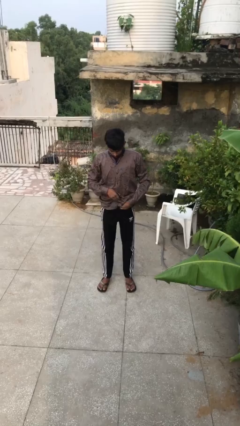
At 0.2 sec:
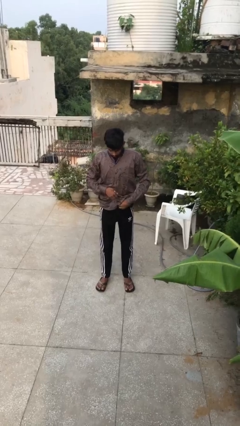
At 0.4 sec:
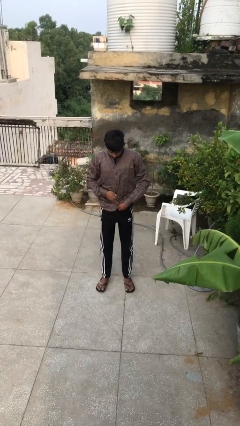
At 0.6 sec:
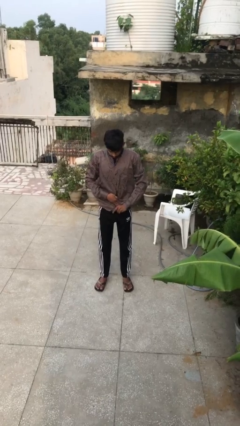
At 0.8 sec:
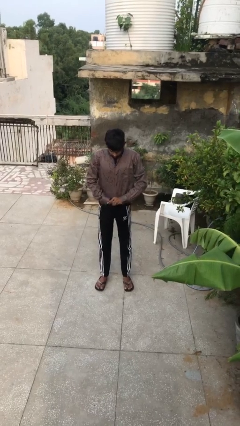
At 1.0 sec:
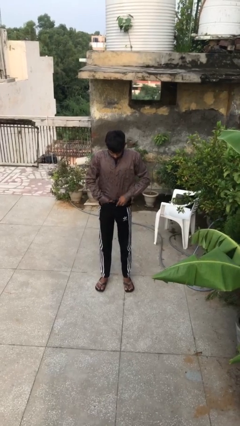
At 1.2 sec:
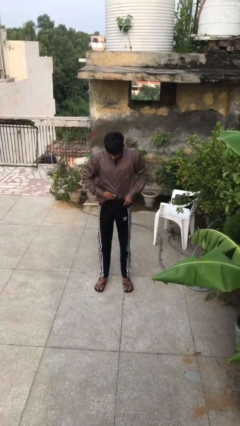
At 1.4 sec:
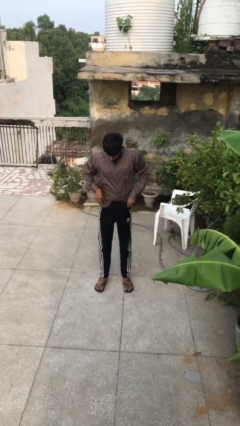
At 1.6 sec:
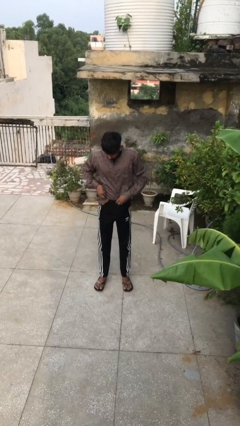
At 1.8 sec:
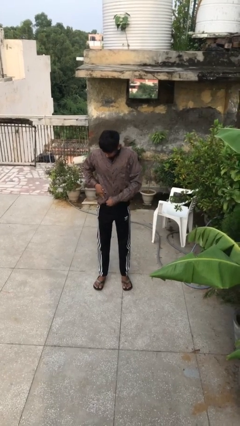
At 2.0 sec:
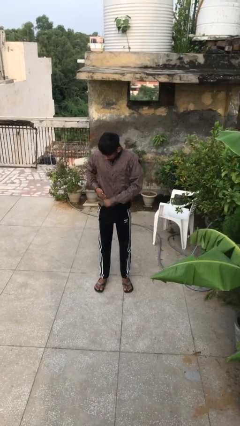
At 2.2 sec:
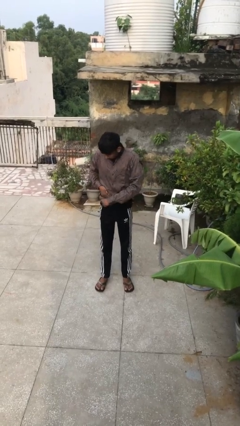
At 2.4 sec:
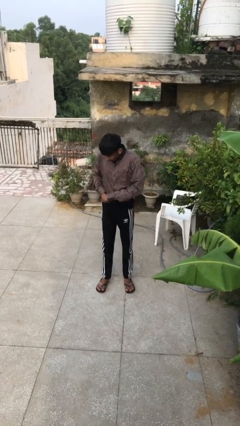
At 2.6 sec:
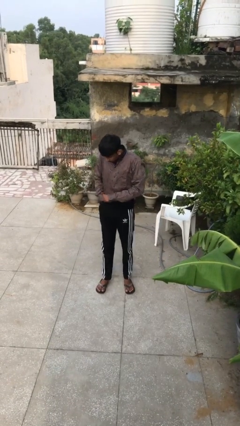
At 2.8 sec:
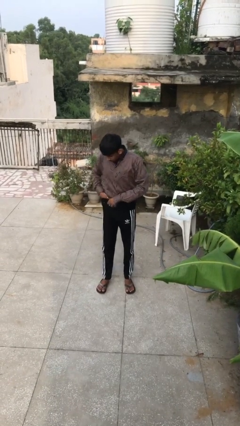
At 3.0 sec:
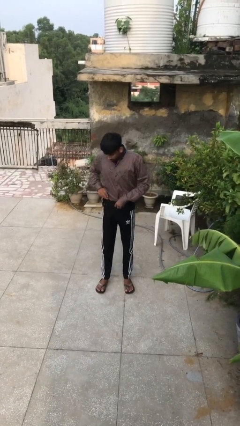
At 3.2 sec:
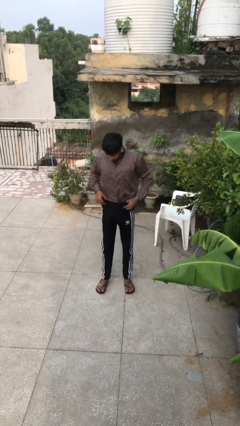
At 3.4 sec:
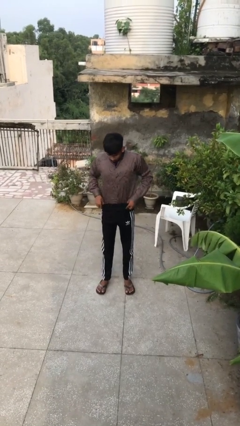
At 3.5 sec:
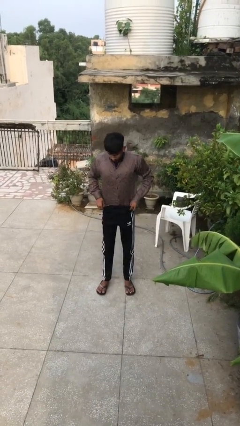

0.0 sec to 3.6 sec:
person tucks in shirt

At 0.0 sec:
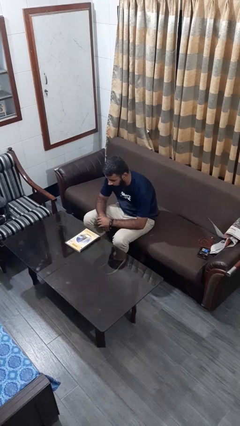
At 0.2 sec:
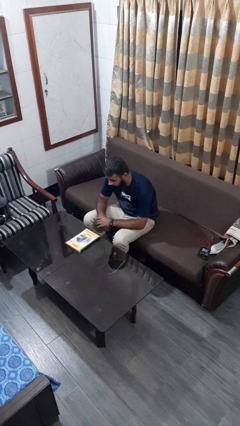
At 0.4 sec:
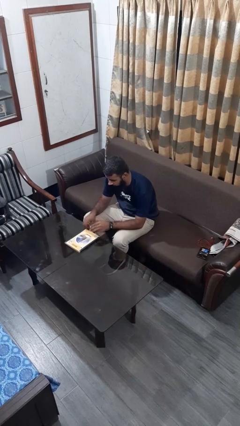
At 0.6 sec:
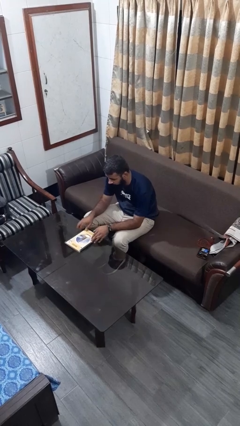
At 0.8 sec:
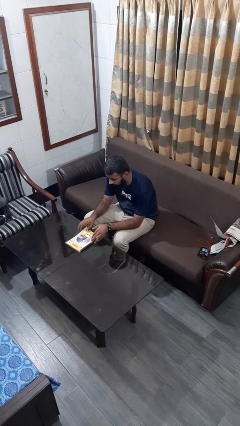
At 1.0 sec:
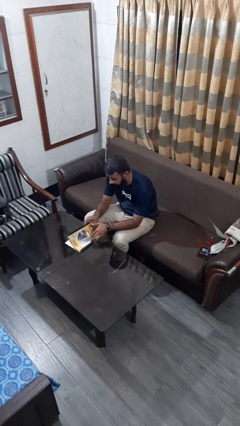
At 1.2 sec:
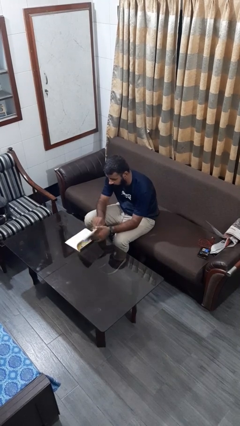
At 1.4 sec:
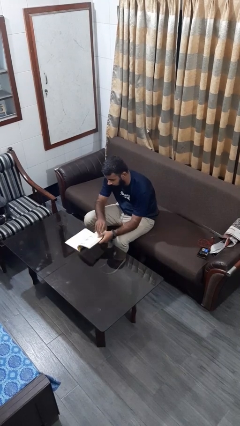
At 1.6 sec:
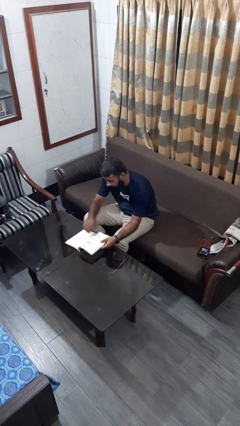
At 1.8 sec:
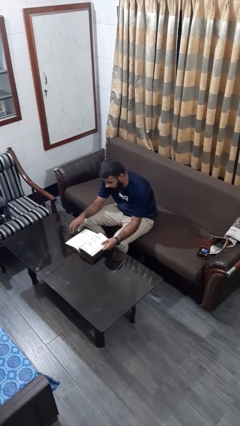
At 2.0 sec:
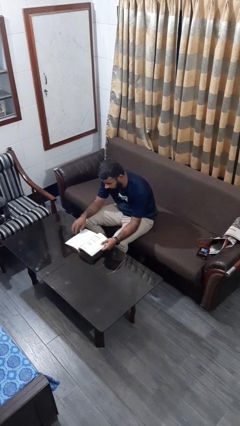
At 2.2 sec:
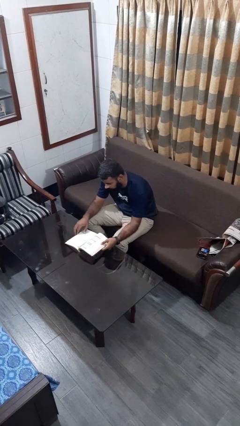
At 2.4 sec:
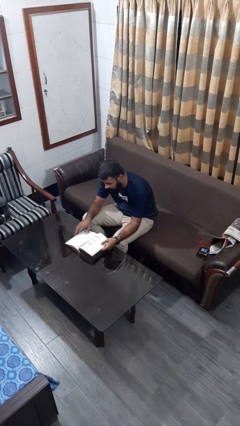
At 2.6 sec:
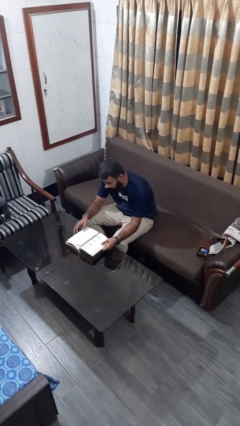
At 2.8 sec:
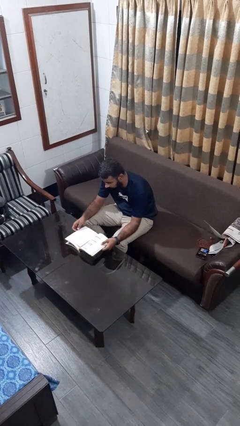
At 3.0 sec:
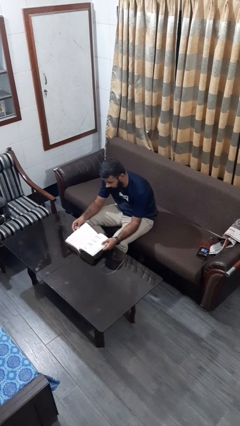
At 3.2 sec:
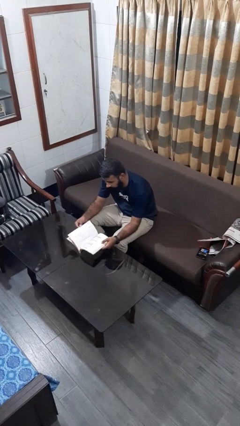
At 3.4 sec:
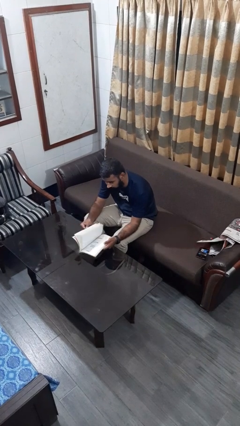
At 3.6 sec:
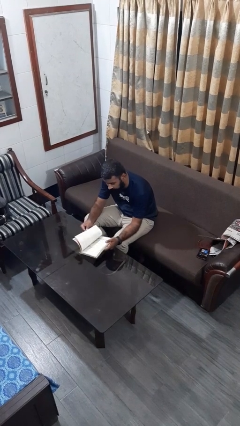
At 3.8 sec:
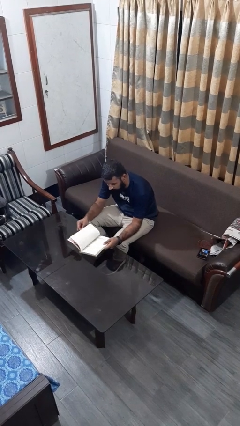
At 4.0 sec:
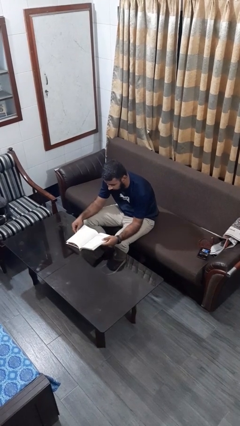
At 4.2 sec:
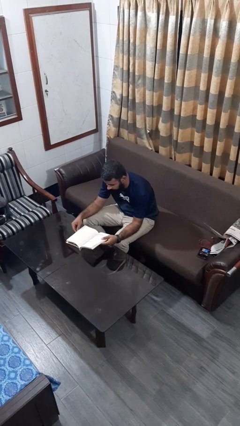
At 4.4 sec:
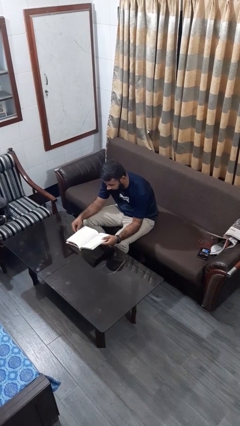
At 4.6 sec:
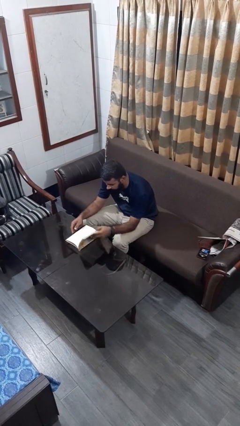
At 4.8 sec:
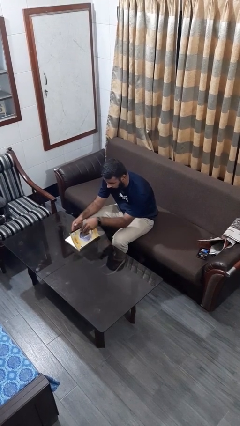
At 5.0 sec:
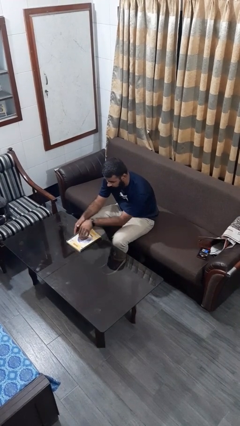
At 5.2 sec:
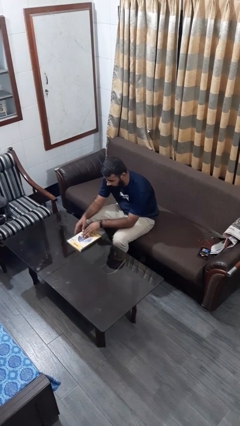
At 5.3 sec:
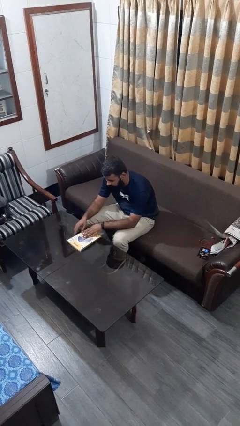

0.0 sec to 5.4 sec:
person reads book

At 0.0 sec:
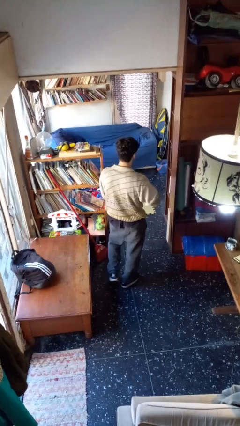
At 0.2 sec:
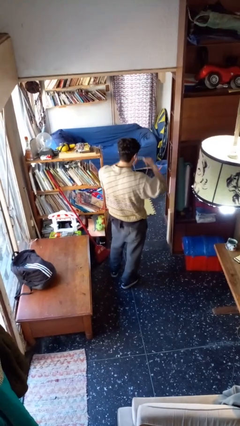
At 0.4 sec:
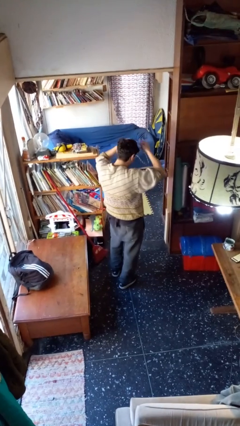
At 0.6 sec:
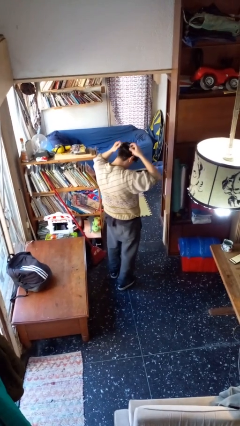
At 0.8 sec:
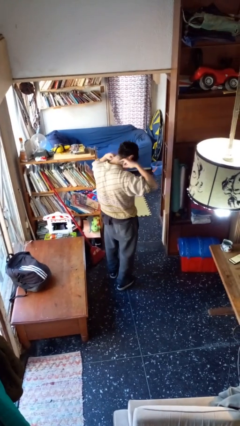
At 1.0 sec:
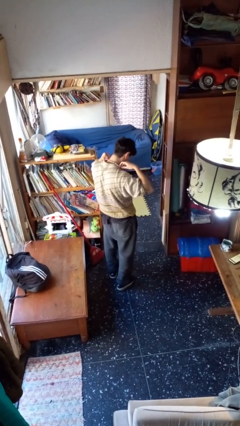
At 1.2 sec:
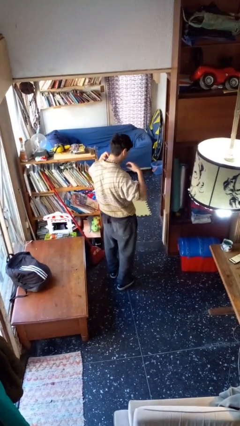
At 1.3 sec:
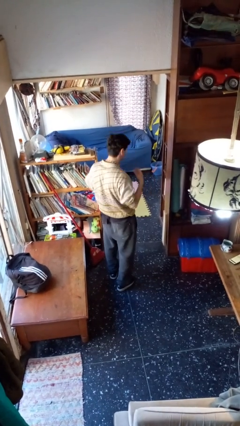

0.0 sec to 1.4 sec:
person puts on necklace

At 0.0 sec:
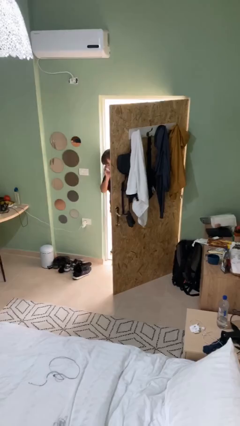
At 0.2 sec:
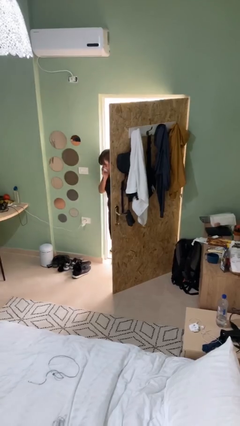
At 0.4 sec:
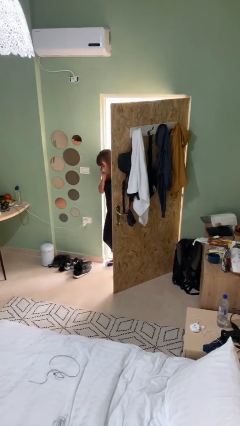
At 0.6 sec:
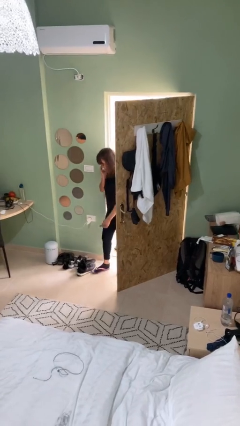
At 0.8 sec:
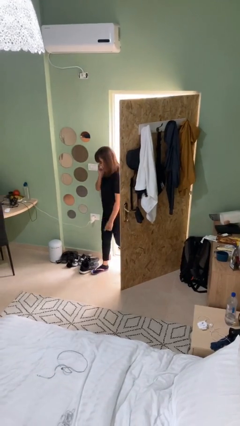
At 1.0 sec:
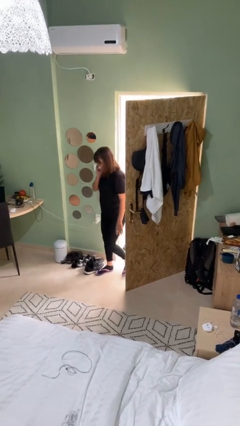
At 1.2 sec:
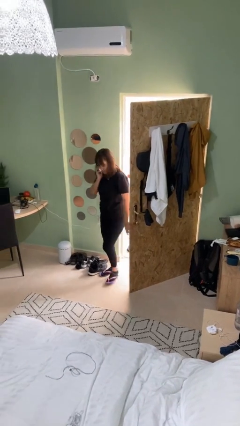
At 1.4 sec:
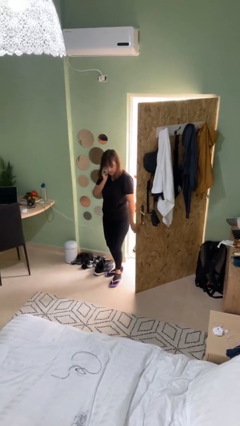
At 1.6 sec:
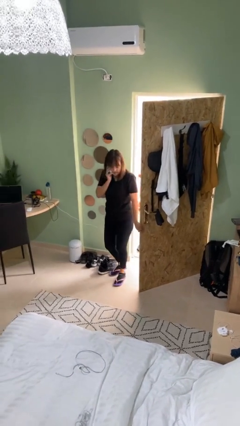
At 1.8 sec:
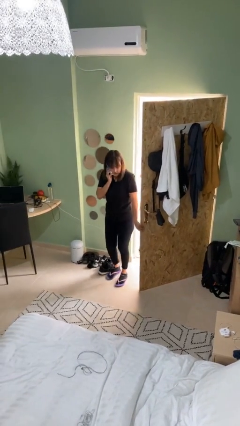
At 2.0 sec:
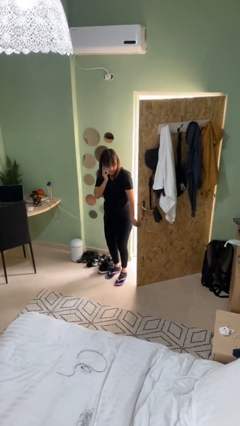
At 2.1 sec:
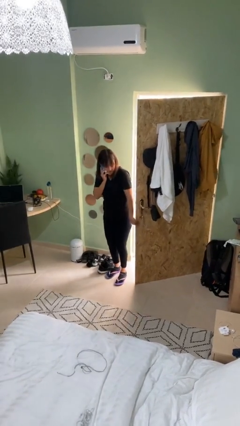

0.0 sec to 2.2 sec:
person enters scene through structure

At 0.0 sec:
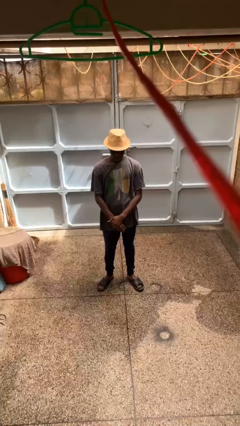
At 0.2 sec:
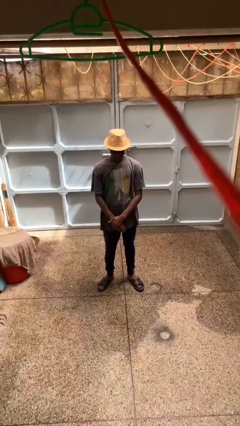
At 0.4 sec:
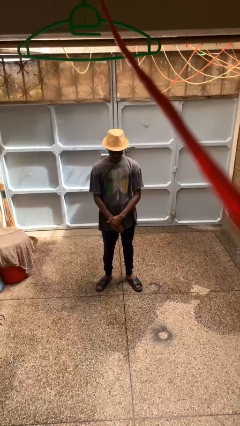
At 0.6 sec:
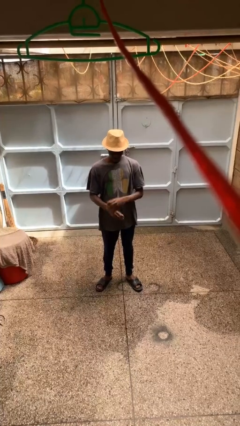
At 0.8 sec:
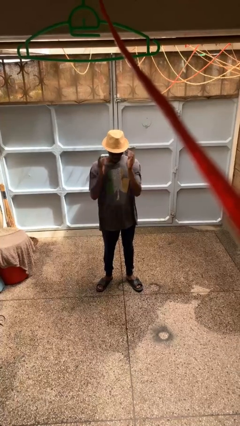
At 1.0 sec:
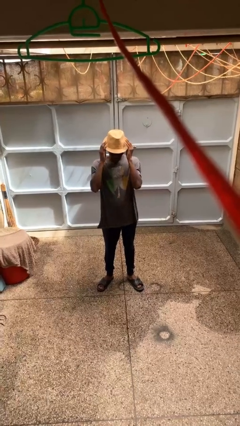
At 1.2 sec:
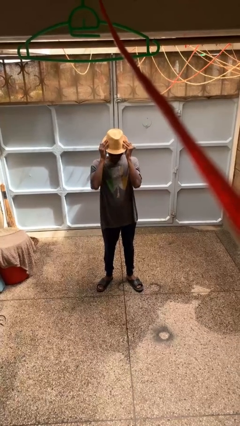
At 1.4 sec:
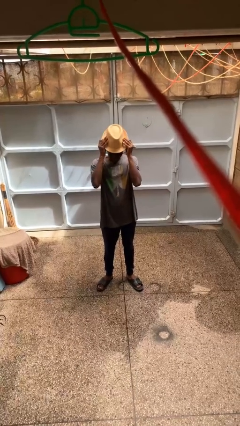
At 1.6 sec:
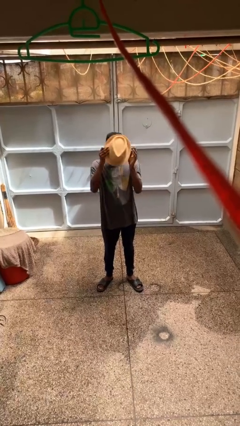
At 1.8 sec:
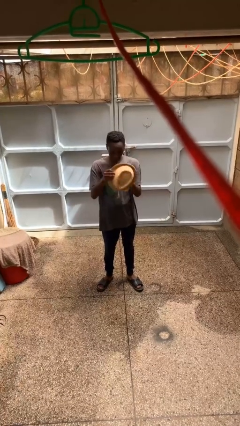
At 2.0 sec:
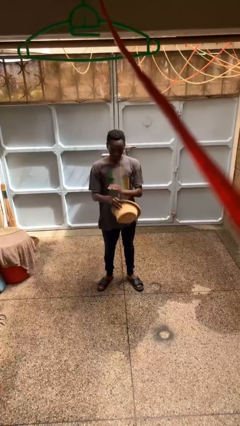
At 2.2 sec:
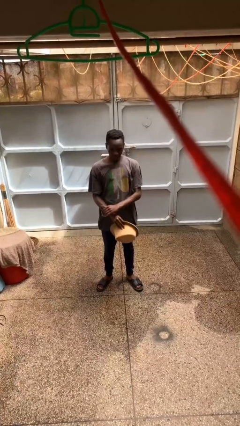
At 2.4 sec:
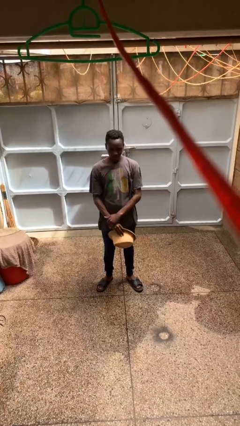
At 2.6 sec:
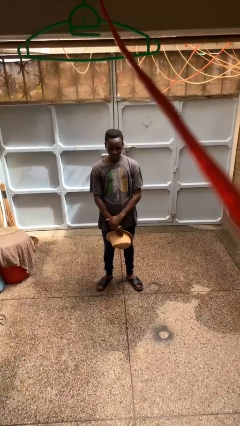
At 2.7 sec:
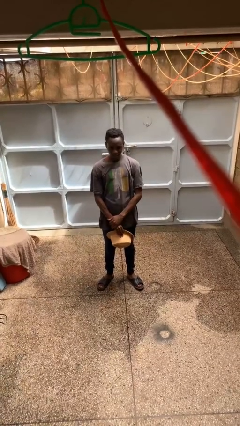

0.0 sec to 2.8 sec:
person takes off hat

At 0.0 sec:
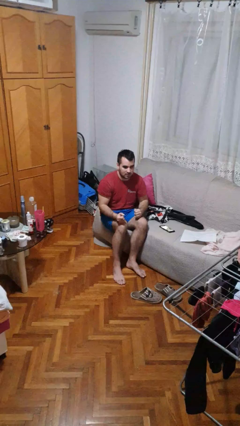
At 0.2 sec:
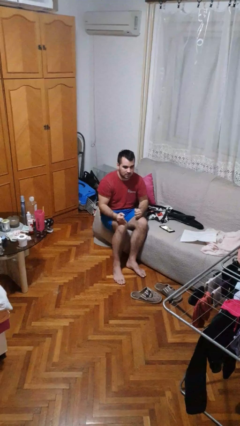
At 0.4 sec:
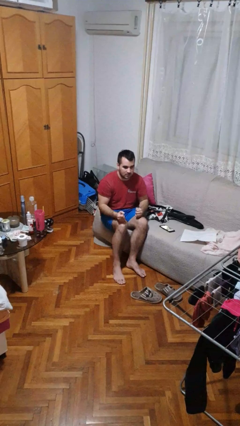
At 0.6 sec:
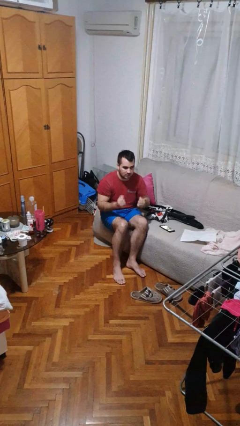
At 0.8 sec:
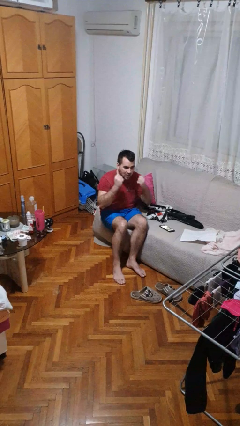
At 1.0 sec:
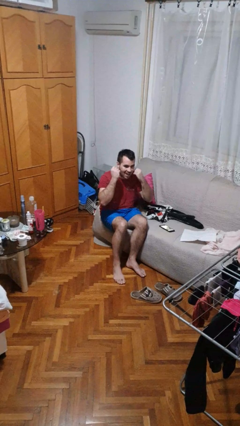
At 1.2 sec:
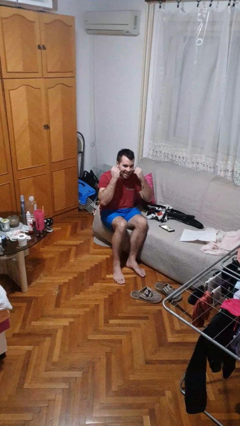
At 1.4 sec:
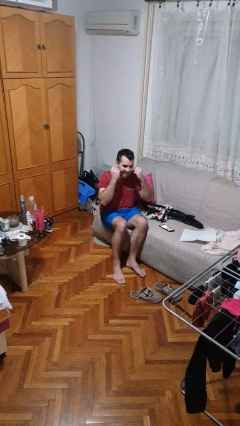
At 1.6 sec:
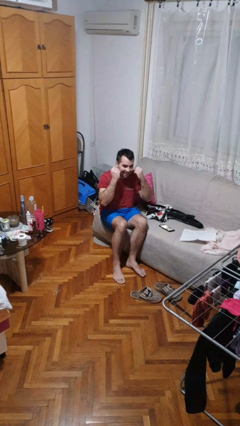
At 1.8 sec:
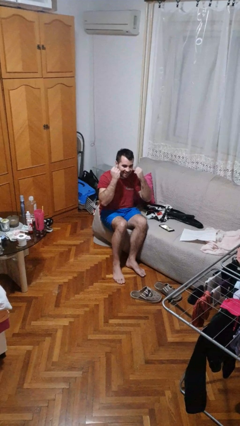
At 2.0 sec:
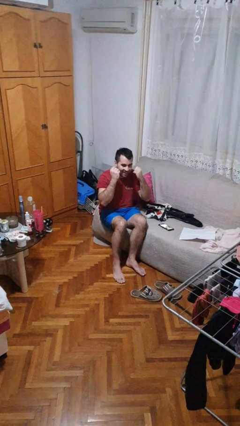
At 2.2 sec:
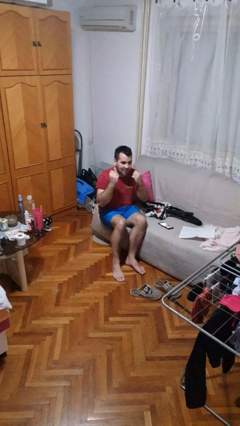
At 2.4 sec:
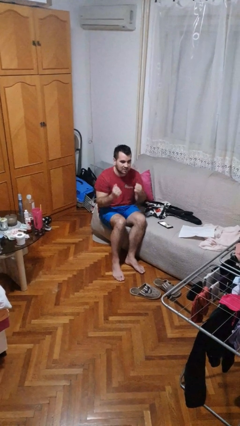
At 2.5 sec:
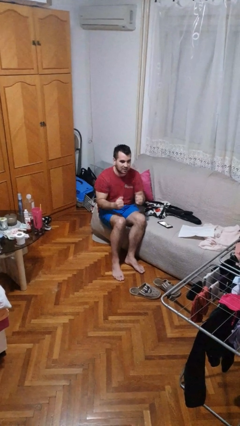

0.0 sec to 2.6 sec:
person flosses
